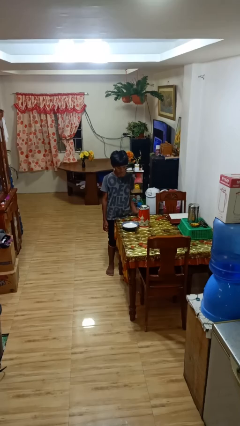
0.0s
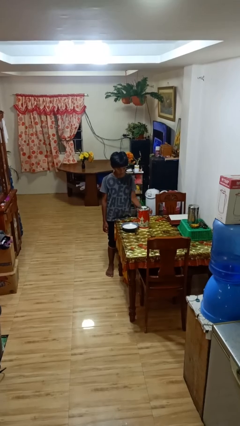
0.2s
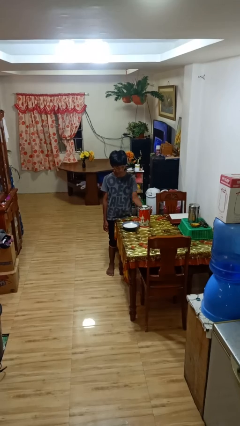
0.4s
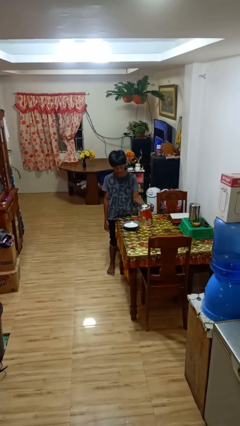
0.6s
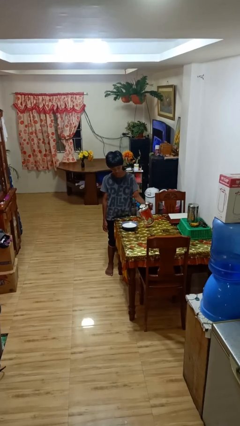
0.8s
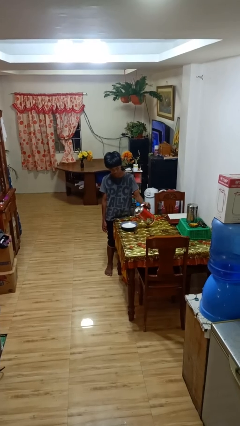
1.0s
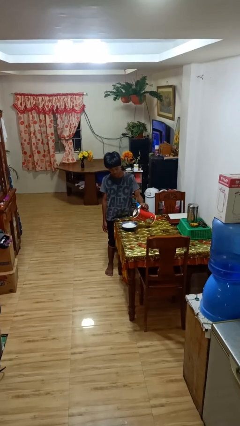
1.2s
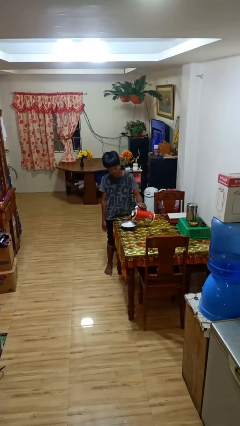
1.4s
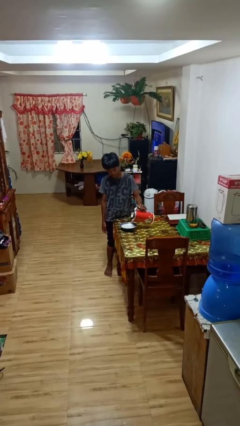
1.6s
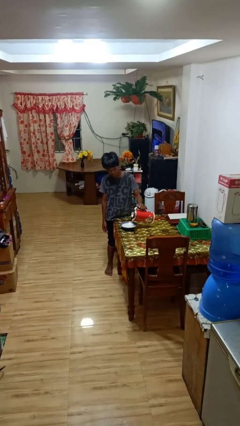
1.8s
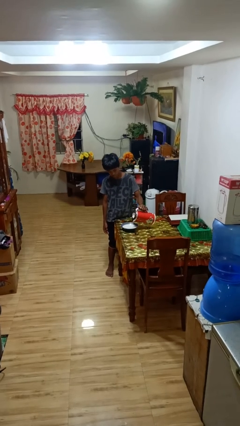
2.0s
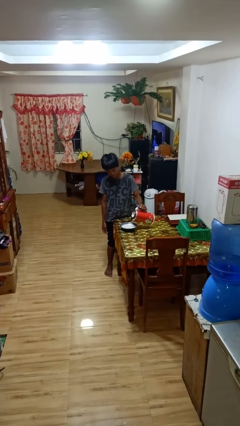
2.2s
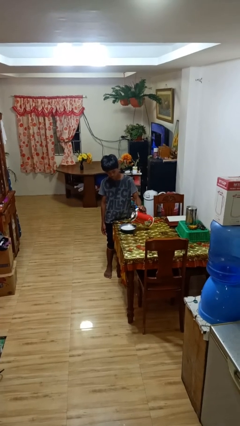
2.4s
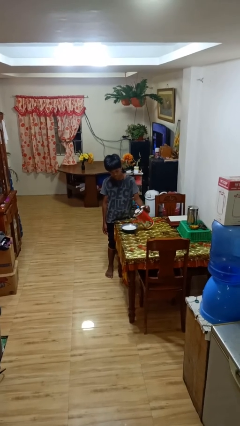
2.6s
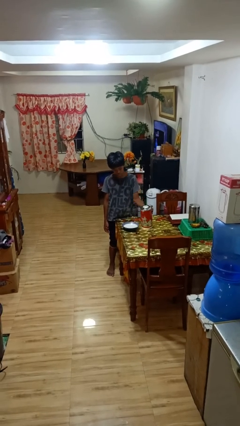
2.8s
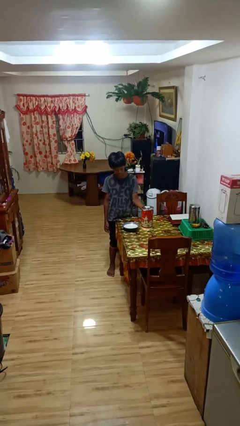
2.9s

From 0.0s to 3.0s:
person pours into bowl

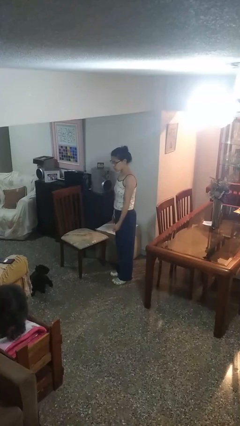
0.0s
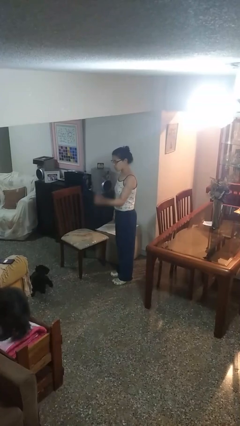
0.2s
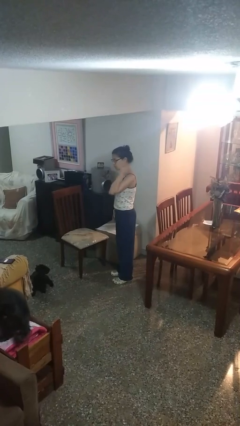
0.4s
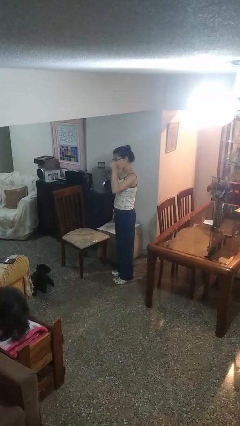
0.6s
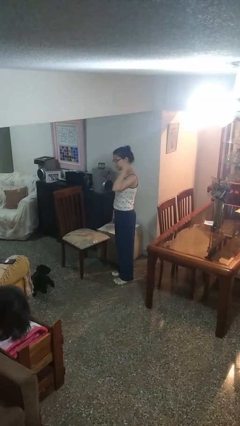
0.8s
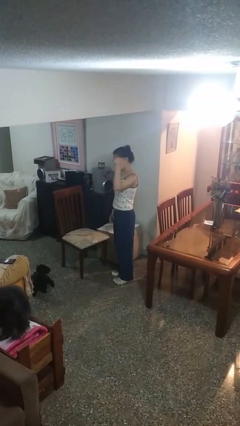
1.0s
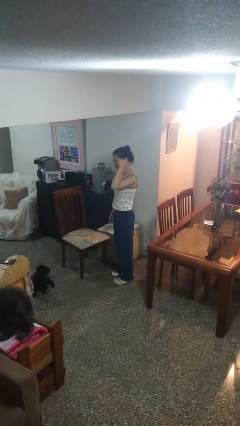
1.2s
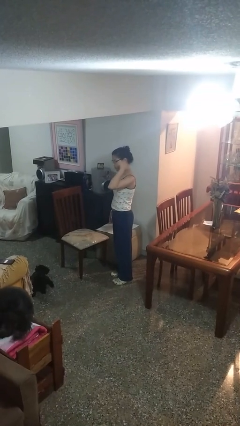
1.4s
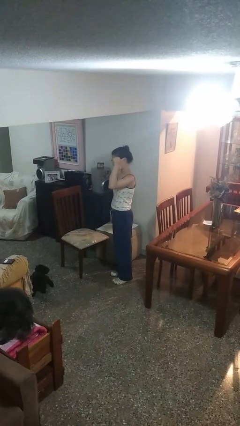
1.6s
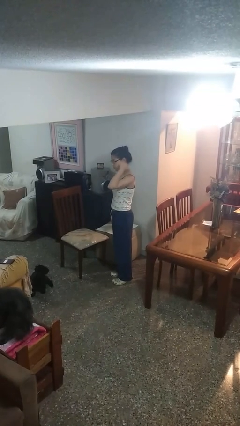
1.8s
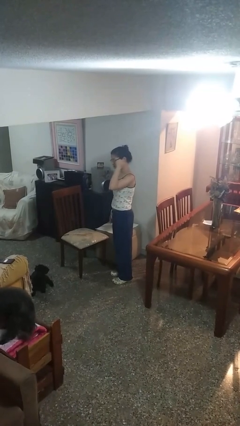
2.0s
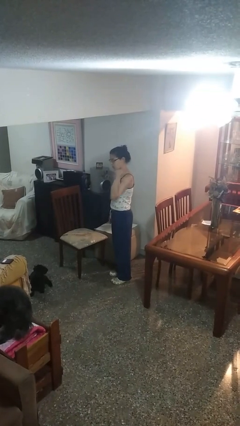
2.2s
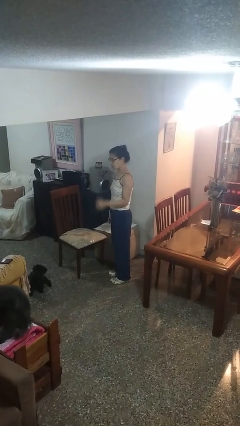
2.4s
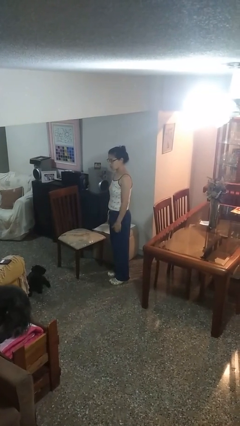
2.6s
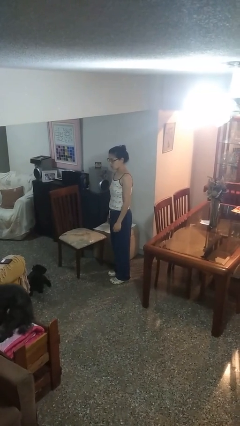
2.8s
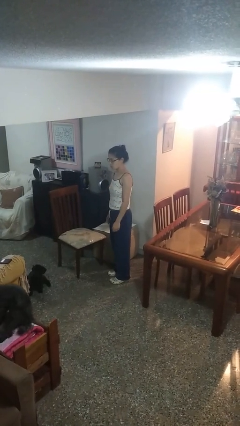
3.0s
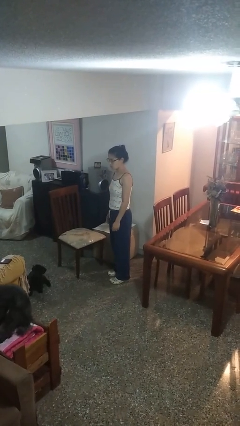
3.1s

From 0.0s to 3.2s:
person gestures behind me

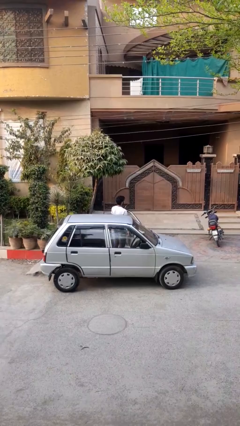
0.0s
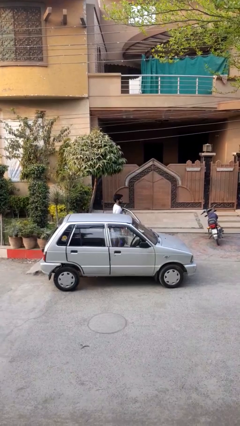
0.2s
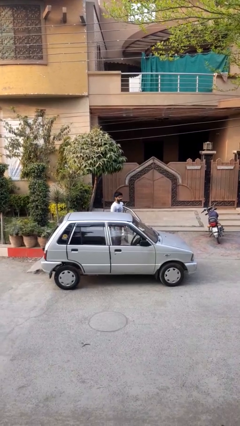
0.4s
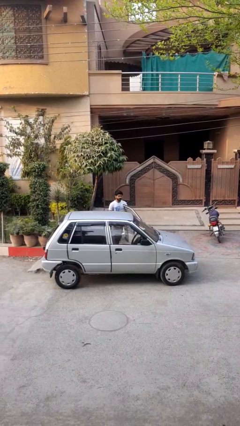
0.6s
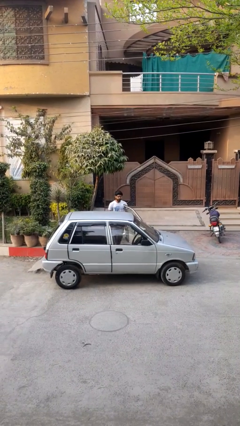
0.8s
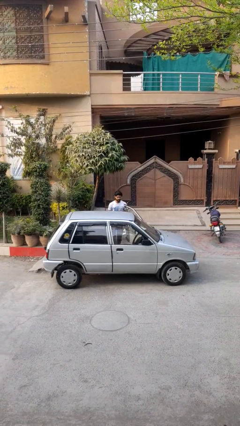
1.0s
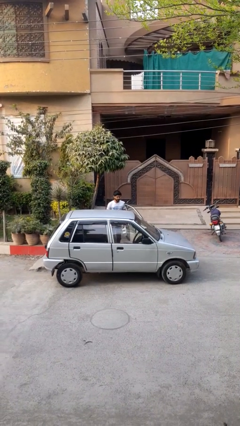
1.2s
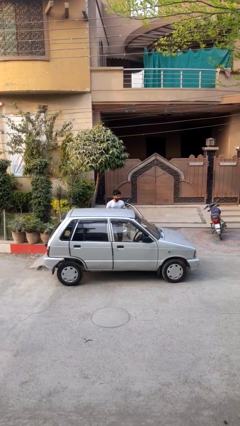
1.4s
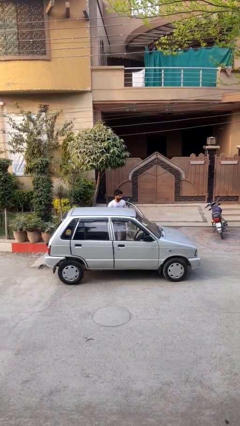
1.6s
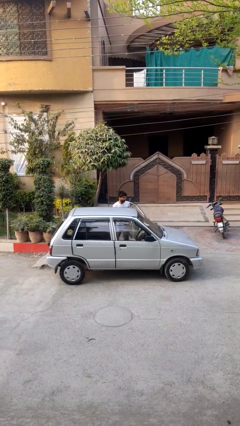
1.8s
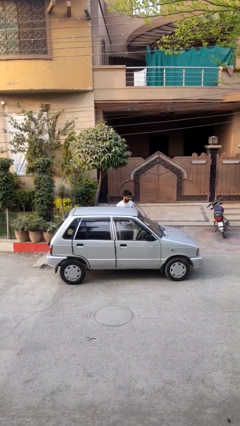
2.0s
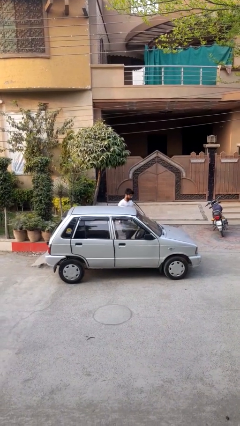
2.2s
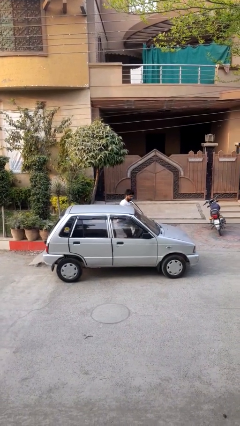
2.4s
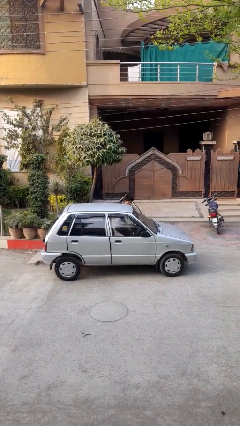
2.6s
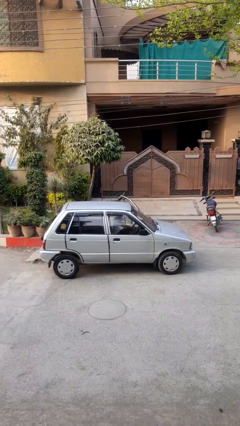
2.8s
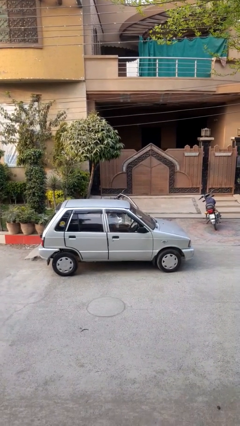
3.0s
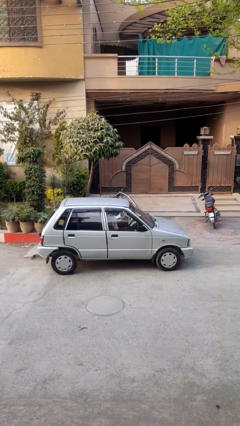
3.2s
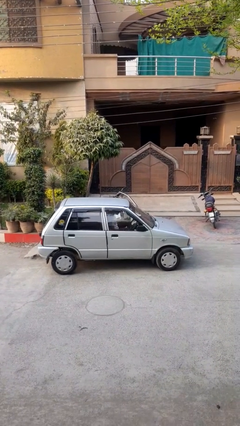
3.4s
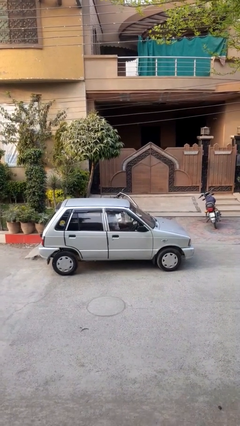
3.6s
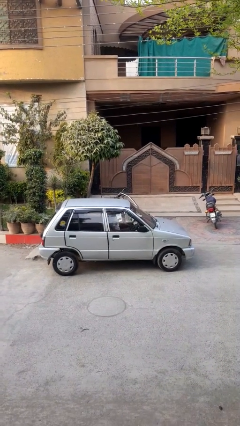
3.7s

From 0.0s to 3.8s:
person enters car

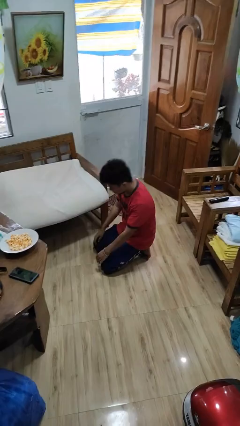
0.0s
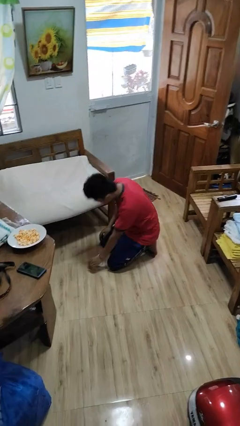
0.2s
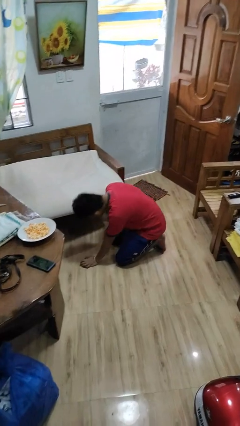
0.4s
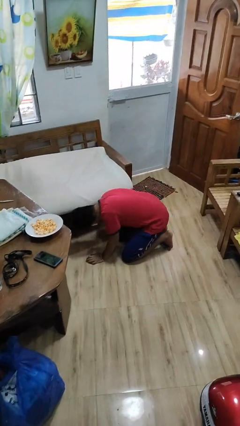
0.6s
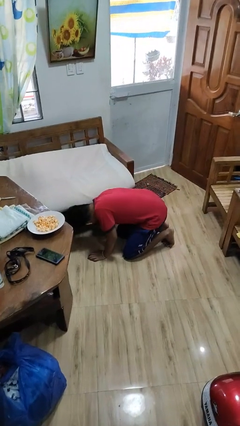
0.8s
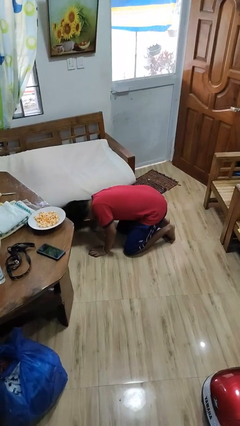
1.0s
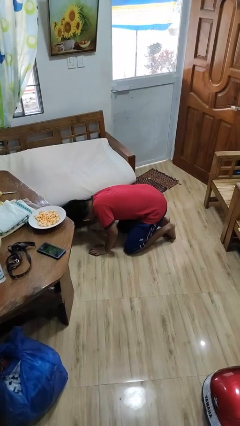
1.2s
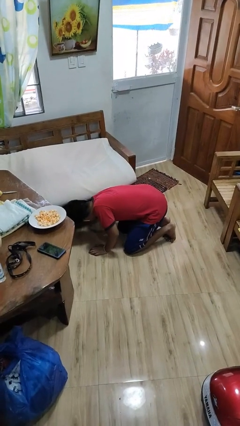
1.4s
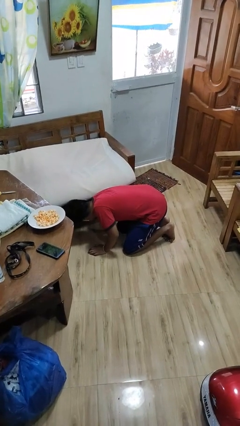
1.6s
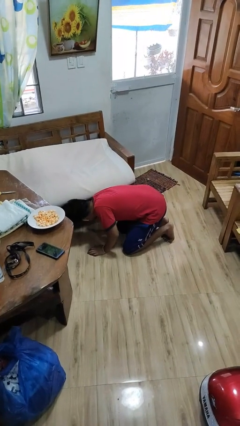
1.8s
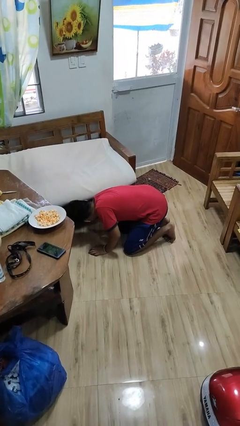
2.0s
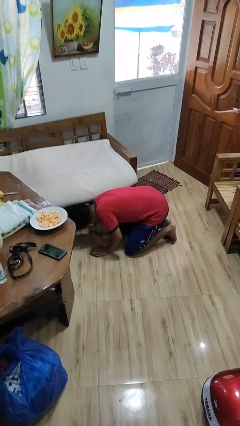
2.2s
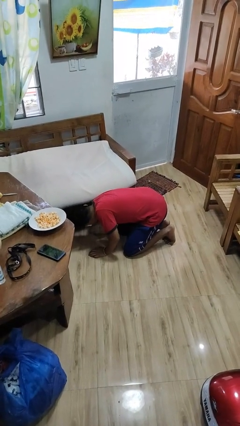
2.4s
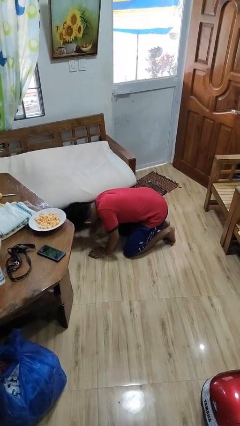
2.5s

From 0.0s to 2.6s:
person searches under couch

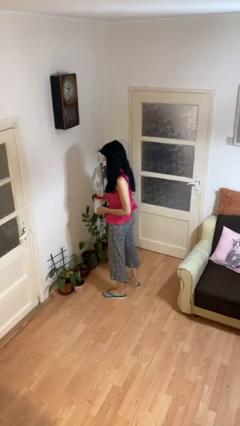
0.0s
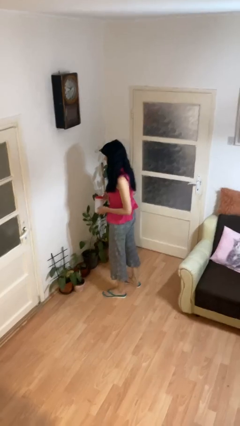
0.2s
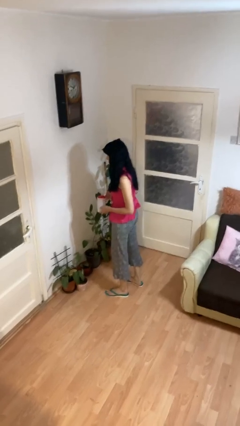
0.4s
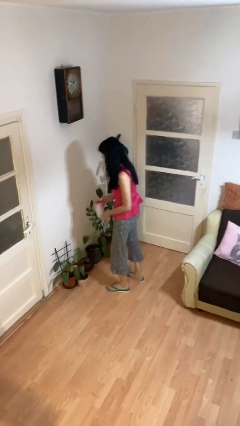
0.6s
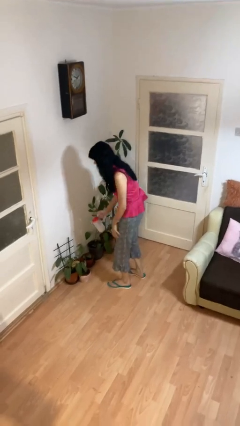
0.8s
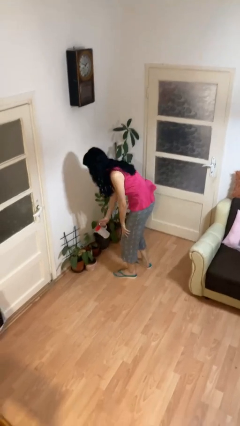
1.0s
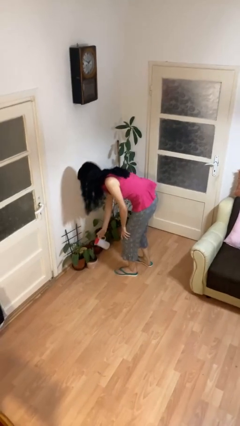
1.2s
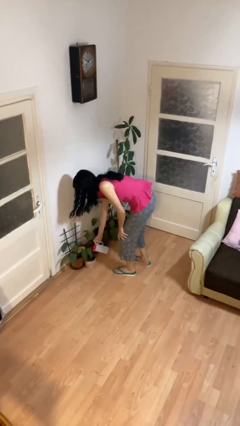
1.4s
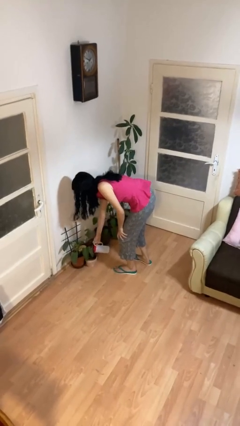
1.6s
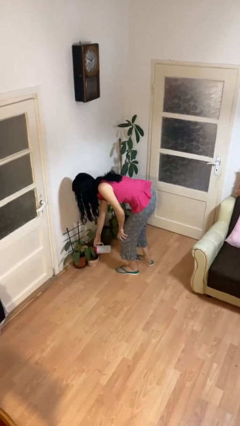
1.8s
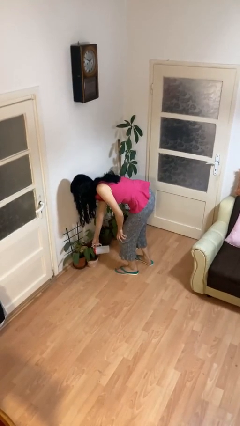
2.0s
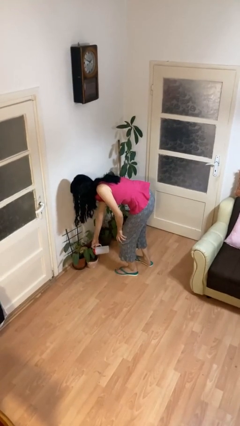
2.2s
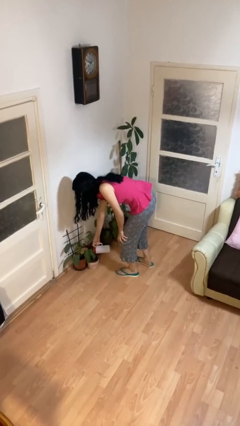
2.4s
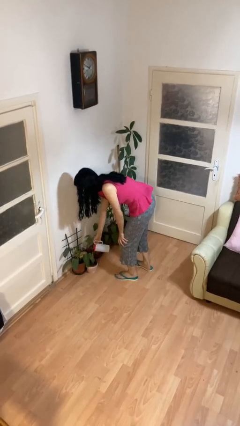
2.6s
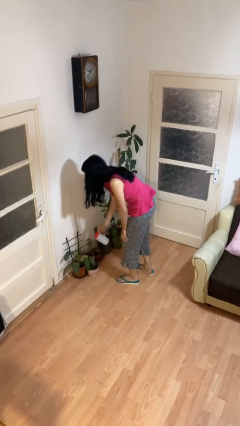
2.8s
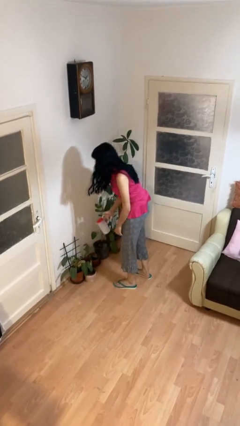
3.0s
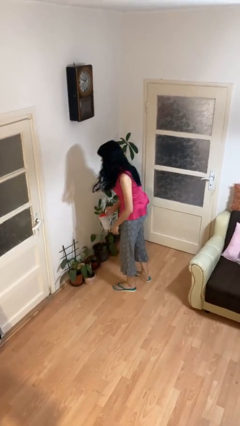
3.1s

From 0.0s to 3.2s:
person waters houseplant

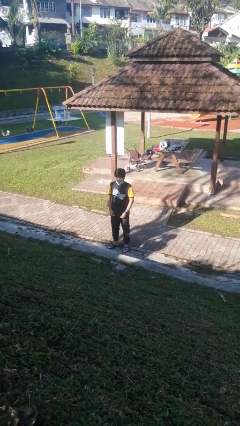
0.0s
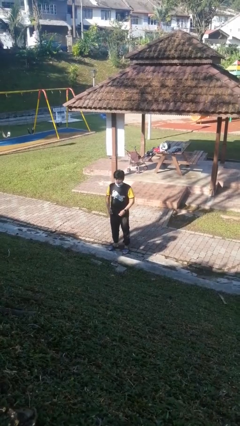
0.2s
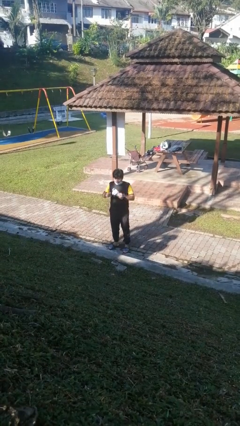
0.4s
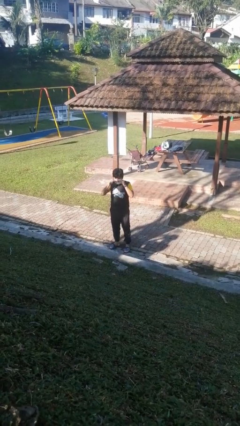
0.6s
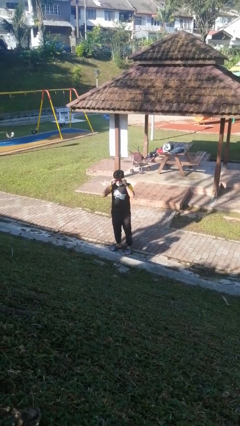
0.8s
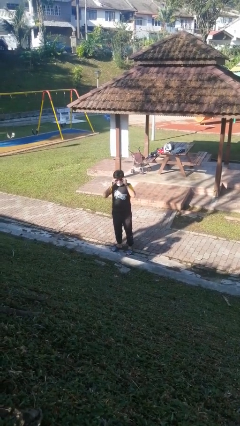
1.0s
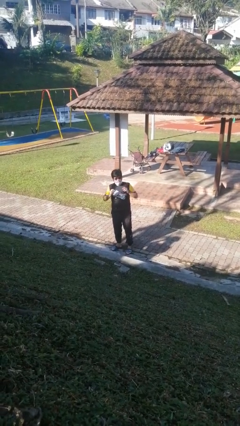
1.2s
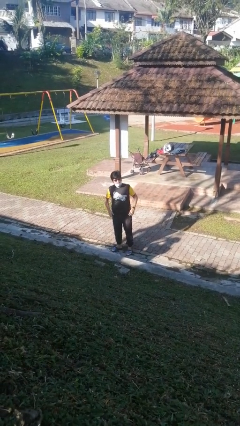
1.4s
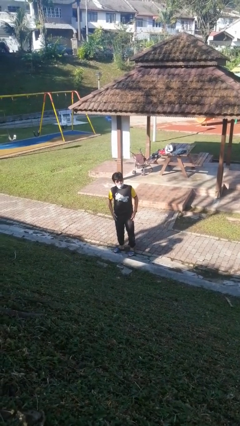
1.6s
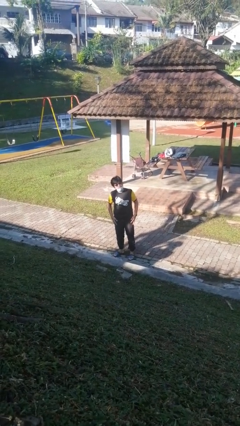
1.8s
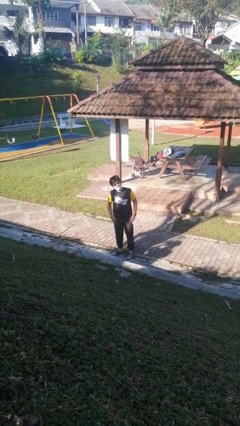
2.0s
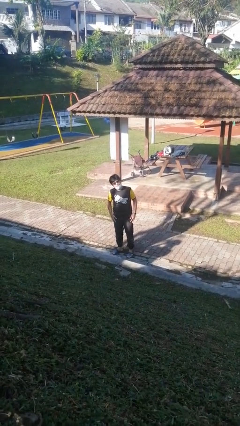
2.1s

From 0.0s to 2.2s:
person puts on sunglasses
